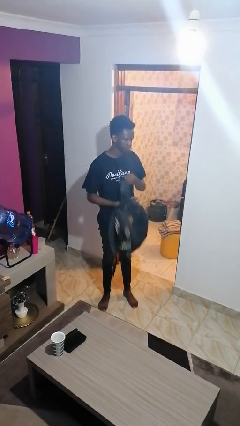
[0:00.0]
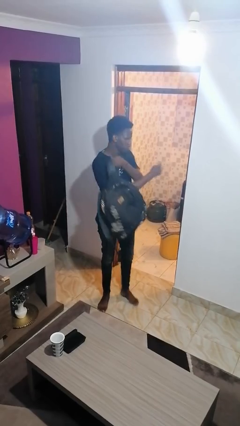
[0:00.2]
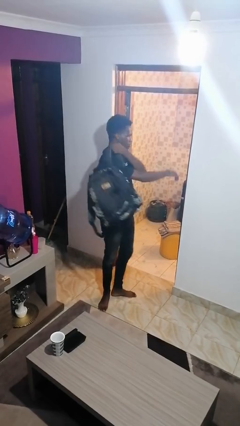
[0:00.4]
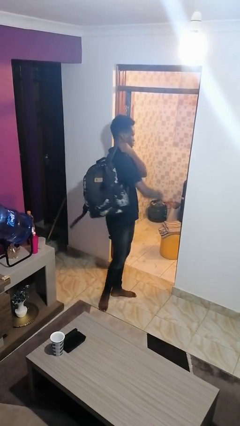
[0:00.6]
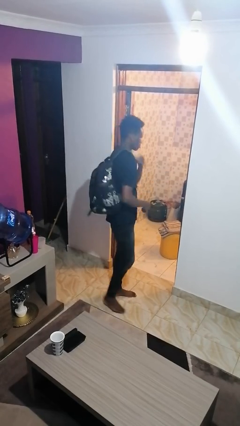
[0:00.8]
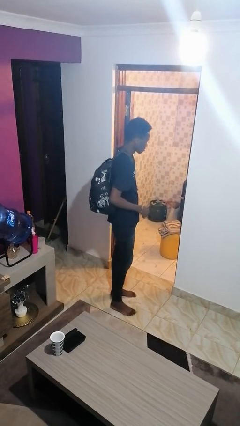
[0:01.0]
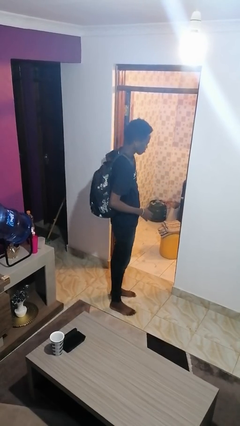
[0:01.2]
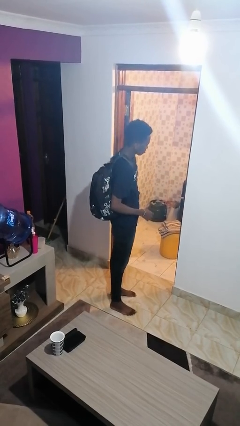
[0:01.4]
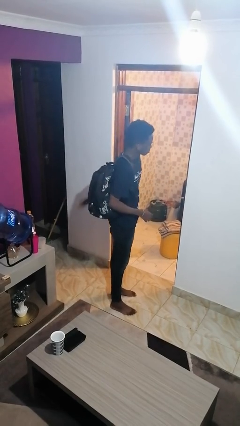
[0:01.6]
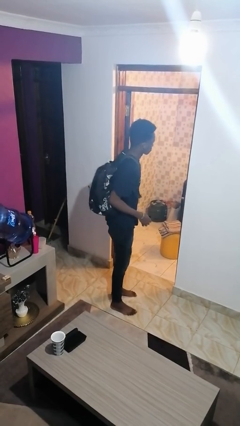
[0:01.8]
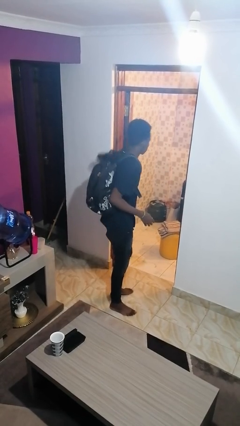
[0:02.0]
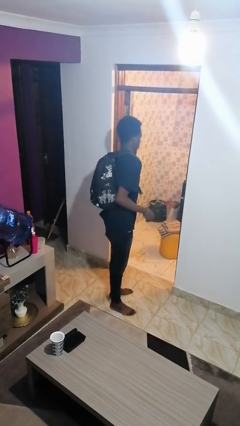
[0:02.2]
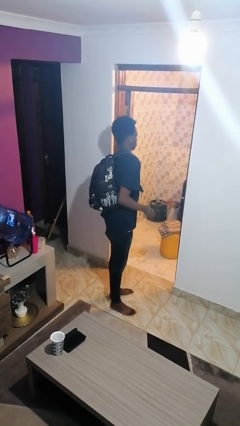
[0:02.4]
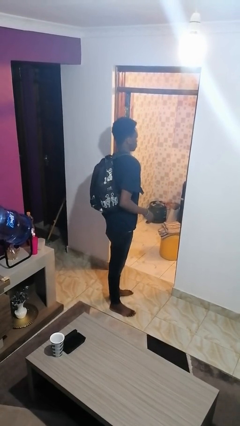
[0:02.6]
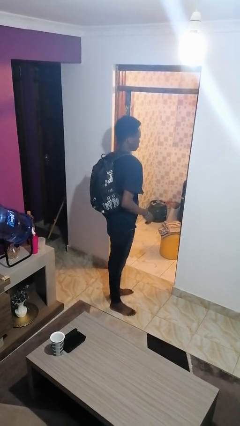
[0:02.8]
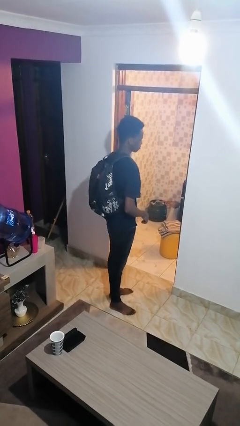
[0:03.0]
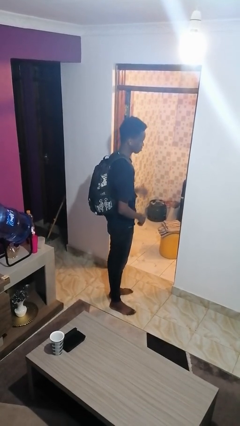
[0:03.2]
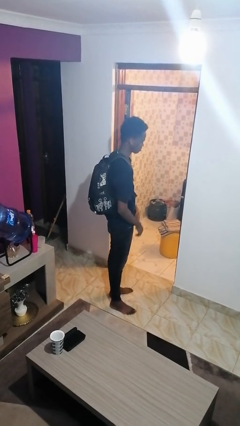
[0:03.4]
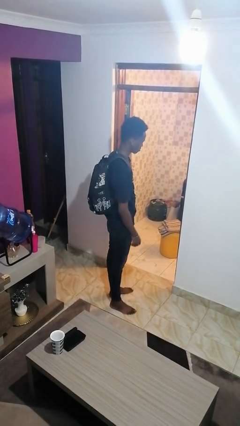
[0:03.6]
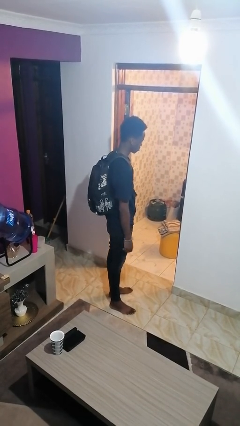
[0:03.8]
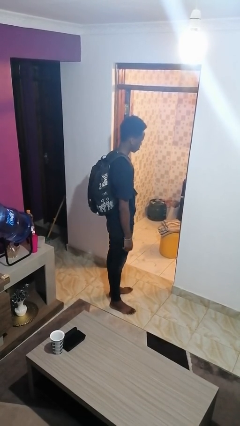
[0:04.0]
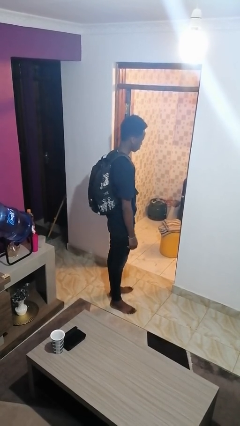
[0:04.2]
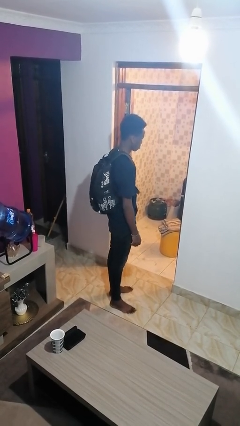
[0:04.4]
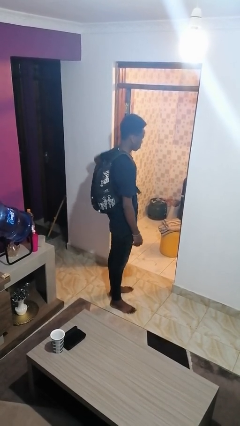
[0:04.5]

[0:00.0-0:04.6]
person puts on backpack

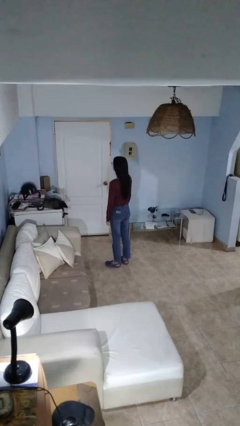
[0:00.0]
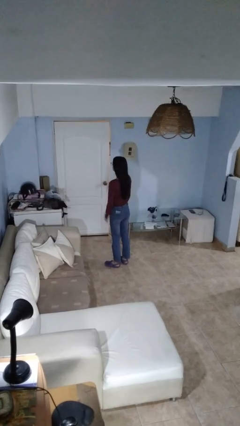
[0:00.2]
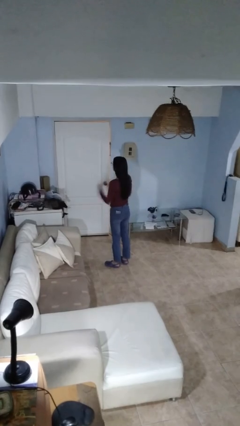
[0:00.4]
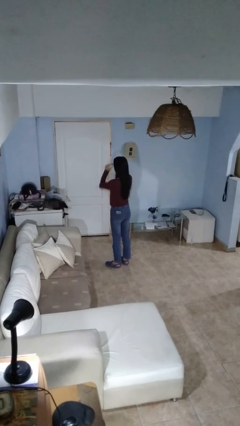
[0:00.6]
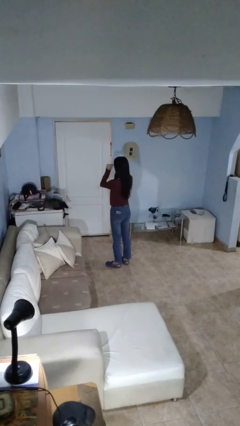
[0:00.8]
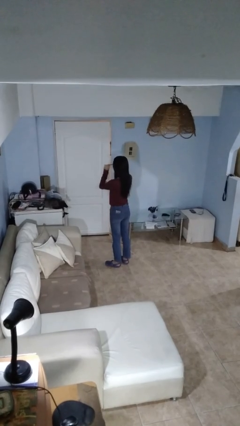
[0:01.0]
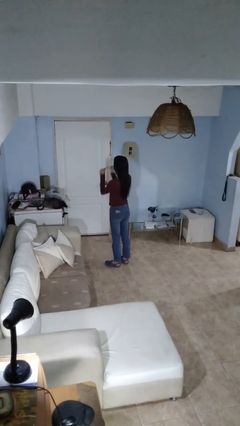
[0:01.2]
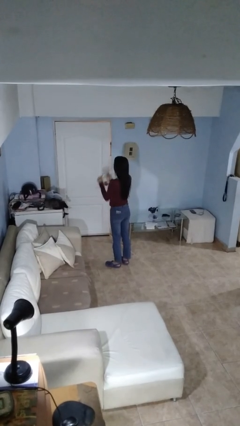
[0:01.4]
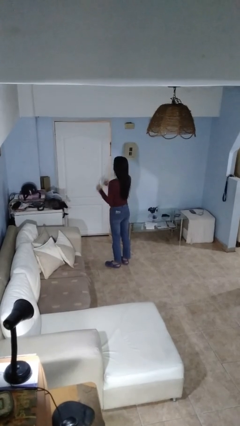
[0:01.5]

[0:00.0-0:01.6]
person takes off glasses

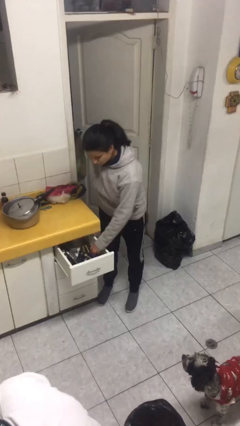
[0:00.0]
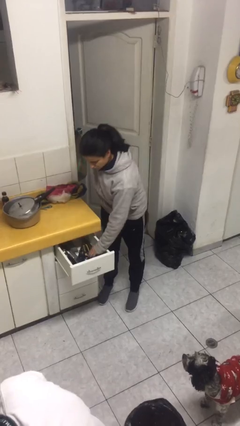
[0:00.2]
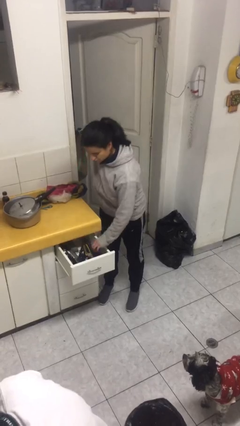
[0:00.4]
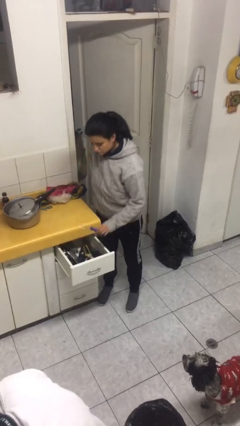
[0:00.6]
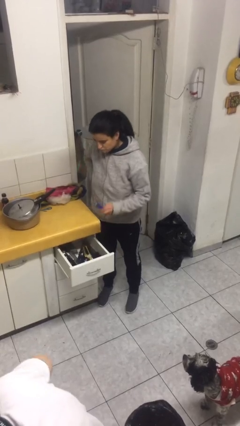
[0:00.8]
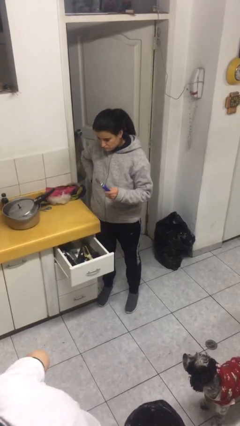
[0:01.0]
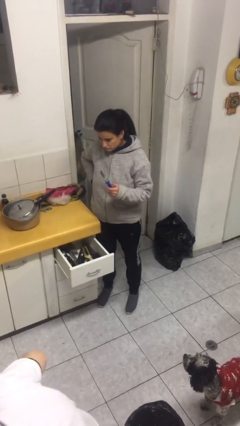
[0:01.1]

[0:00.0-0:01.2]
person takes object from kitchen drawer

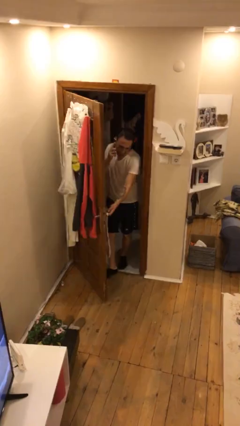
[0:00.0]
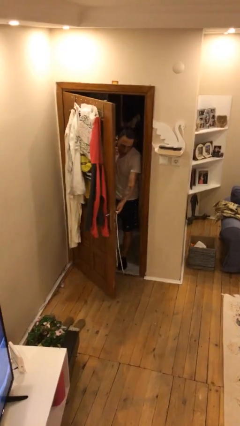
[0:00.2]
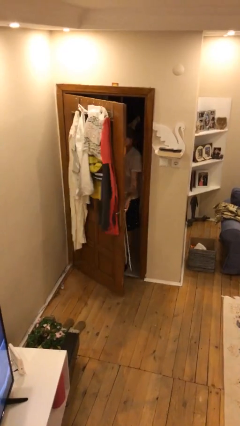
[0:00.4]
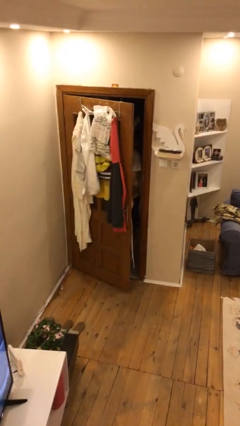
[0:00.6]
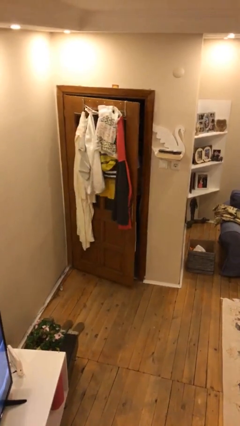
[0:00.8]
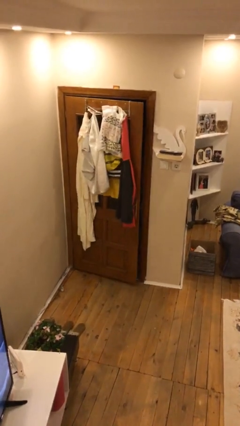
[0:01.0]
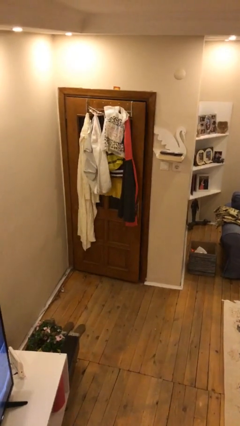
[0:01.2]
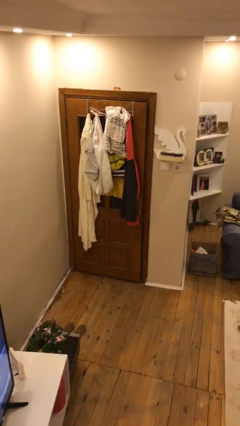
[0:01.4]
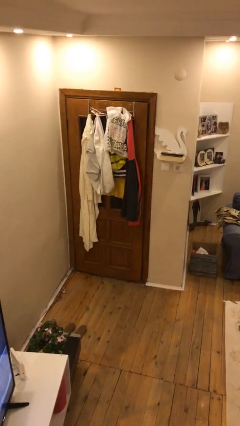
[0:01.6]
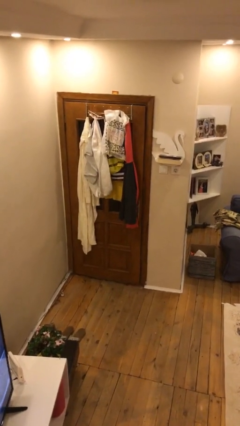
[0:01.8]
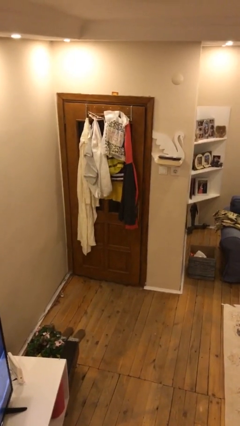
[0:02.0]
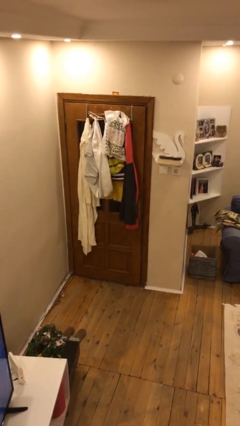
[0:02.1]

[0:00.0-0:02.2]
person closes facility door

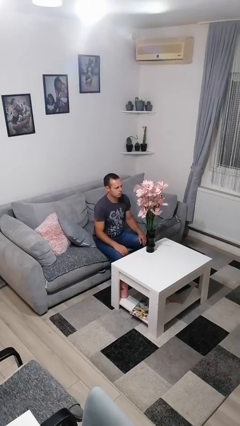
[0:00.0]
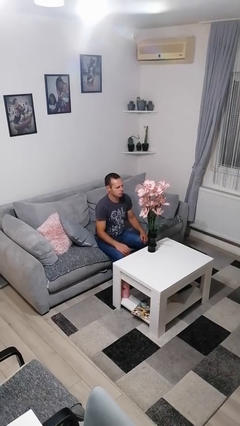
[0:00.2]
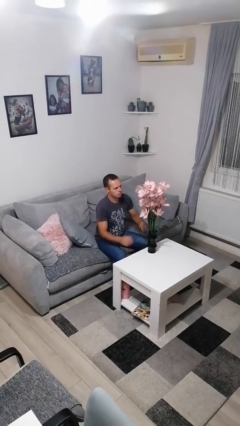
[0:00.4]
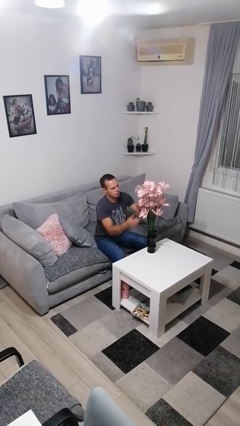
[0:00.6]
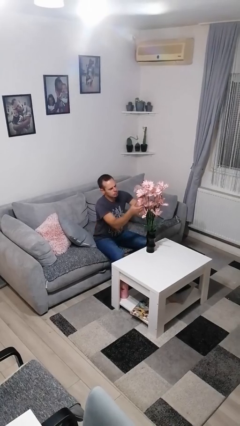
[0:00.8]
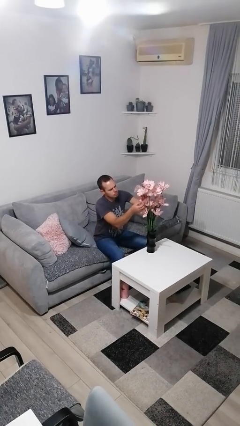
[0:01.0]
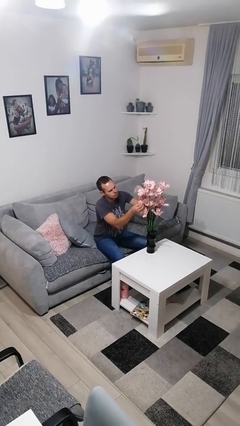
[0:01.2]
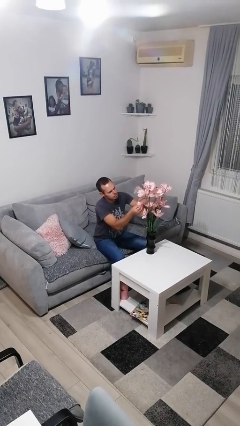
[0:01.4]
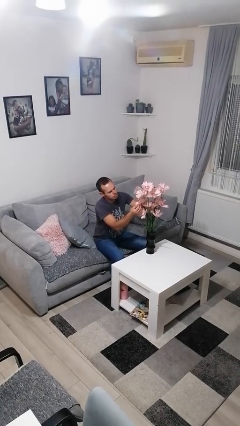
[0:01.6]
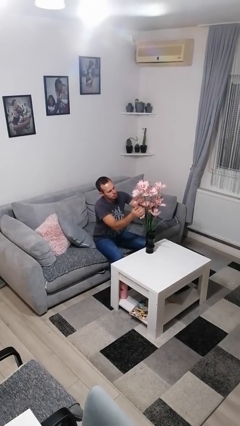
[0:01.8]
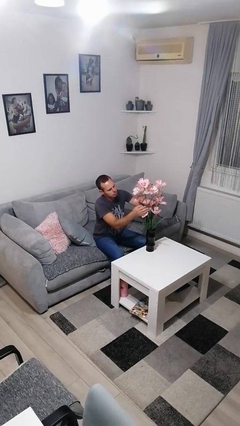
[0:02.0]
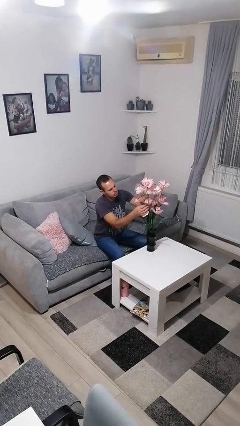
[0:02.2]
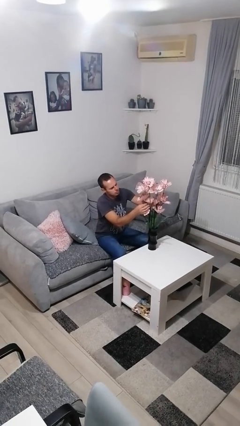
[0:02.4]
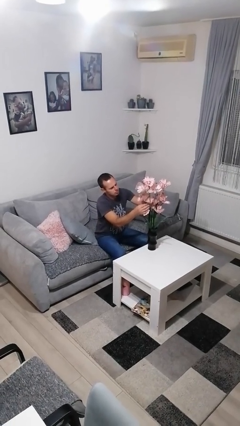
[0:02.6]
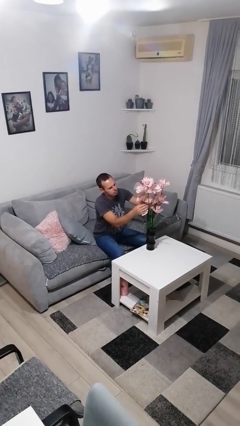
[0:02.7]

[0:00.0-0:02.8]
person arranges flowers in vase

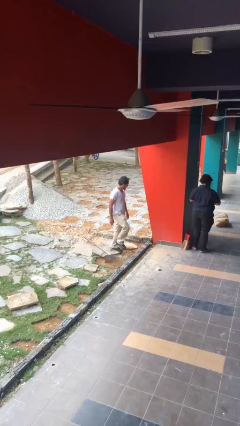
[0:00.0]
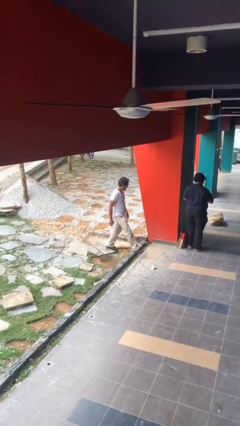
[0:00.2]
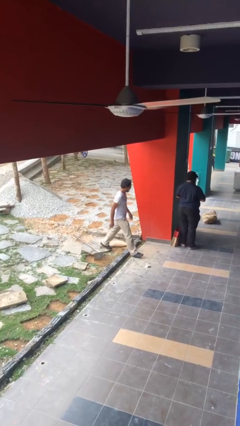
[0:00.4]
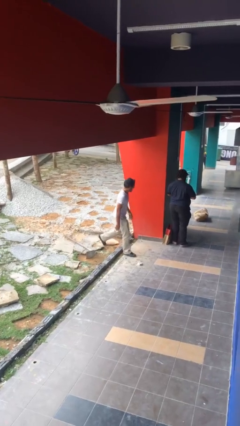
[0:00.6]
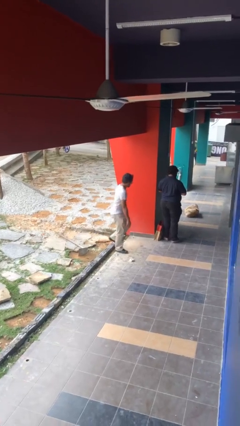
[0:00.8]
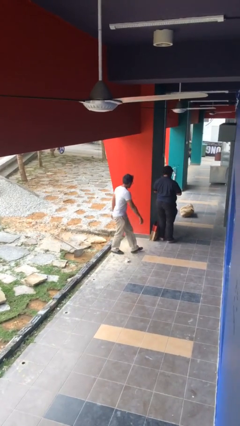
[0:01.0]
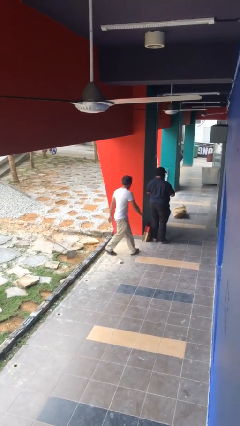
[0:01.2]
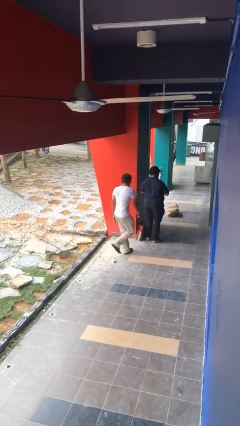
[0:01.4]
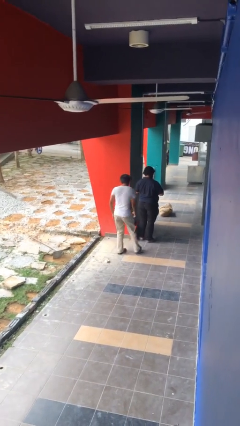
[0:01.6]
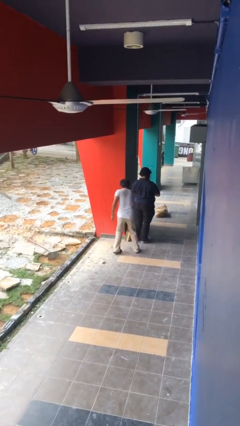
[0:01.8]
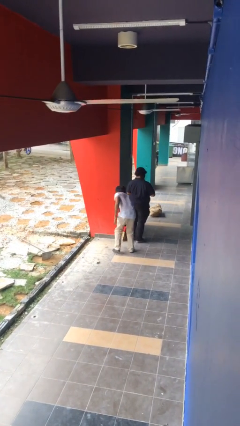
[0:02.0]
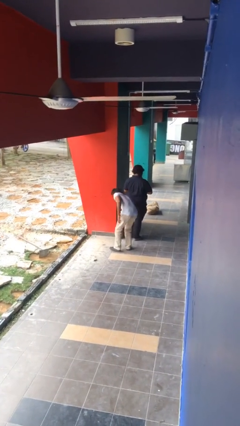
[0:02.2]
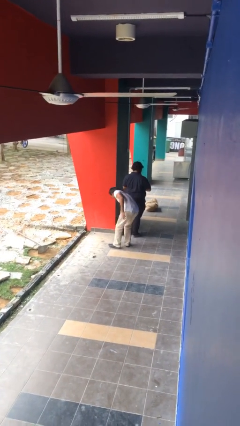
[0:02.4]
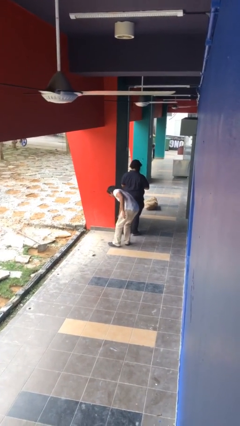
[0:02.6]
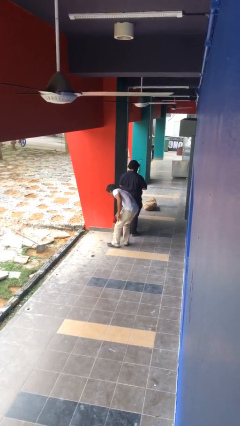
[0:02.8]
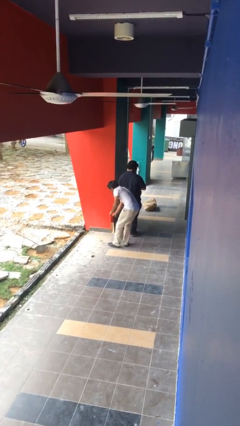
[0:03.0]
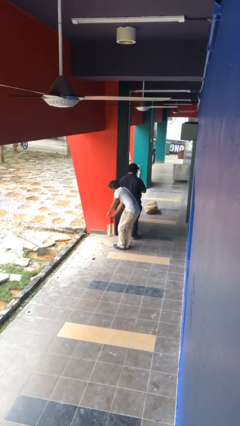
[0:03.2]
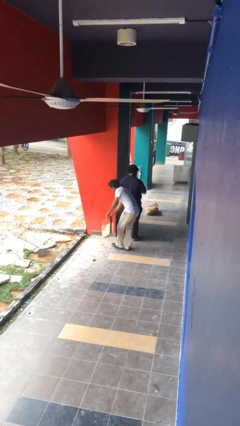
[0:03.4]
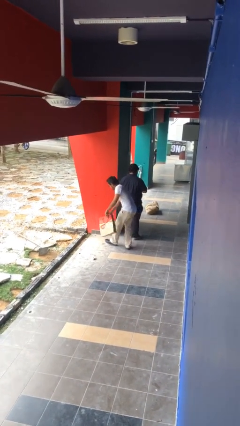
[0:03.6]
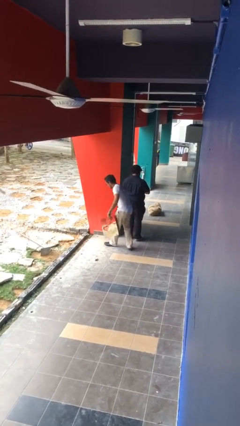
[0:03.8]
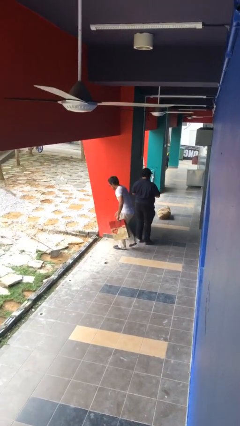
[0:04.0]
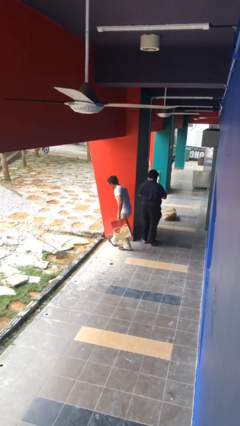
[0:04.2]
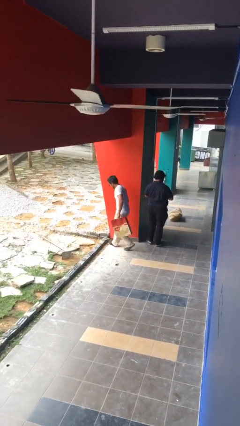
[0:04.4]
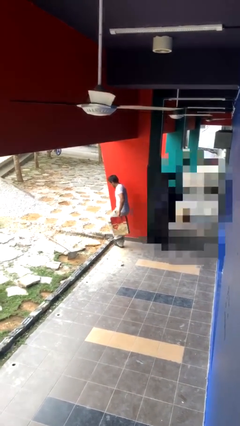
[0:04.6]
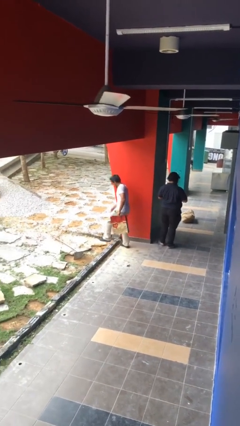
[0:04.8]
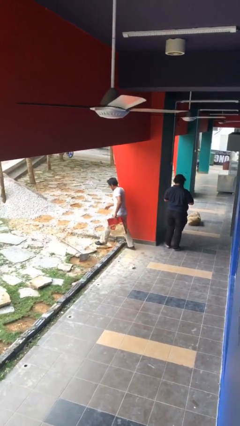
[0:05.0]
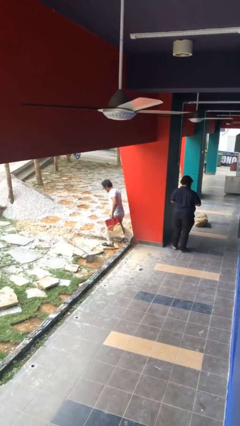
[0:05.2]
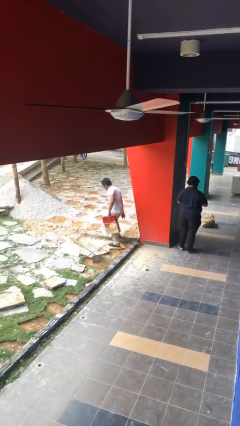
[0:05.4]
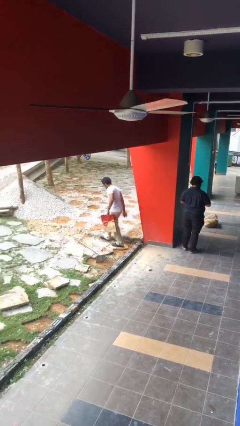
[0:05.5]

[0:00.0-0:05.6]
person steals object from person
